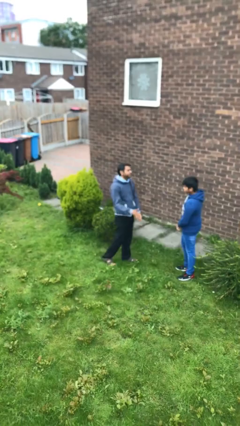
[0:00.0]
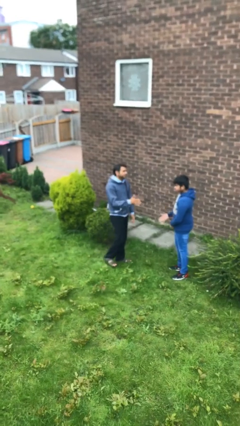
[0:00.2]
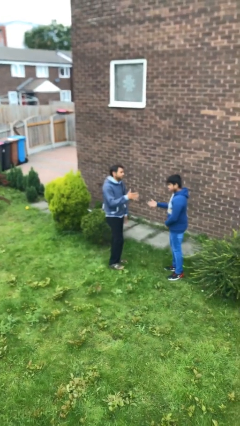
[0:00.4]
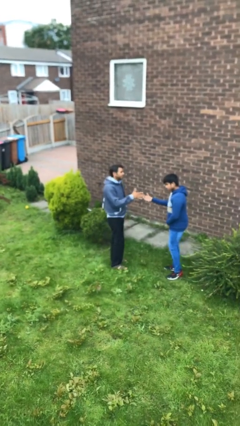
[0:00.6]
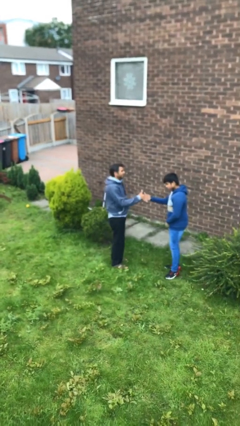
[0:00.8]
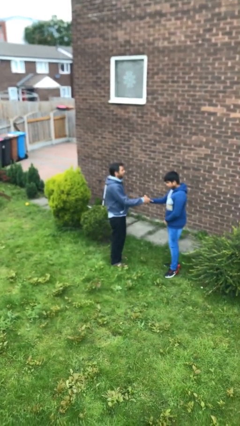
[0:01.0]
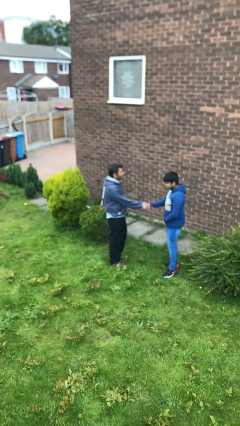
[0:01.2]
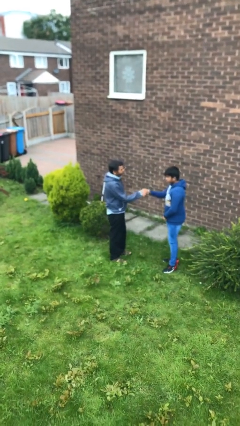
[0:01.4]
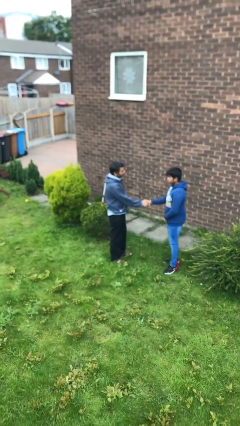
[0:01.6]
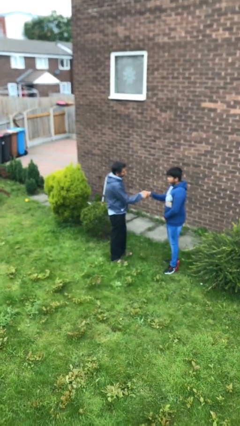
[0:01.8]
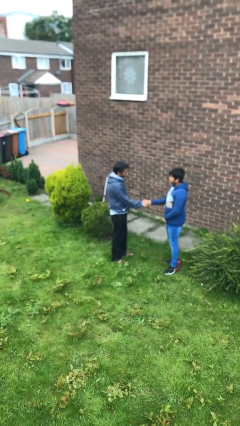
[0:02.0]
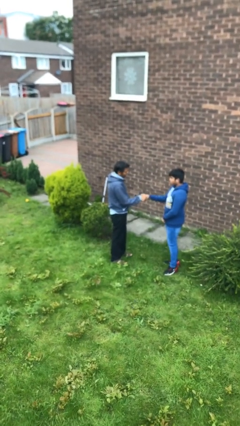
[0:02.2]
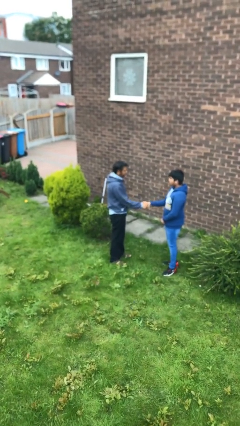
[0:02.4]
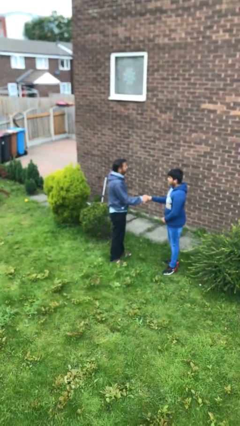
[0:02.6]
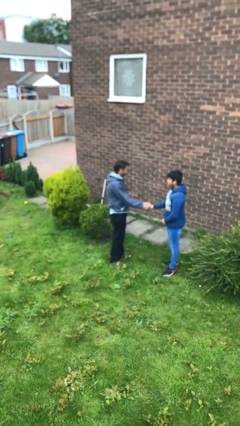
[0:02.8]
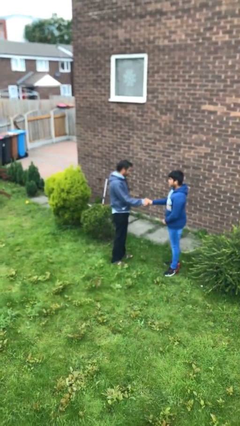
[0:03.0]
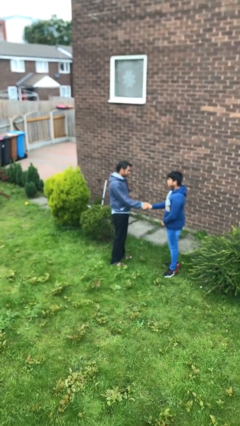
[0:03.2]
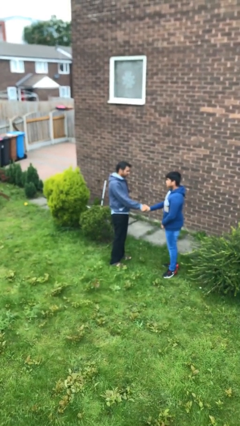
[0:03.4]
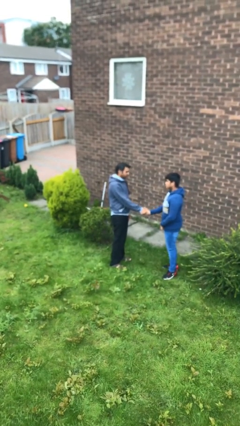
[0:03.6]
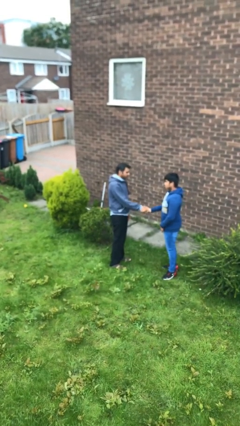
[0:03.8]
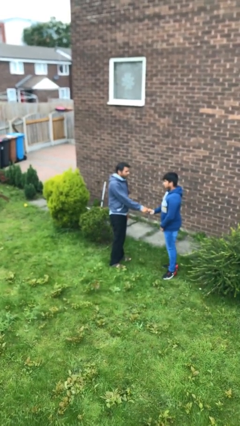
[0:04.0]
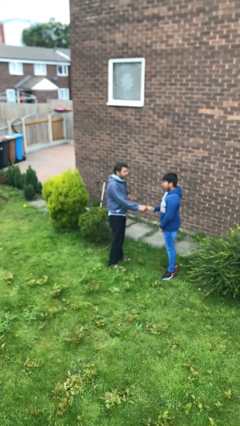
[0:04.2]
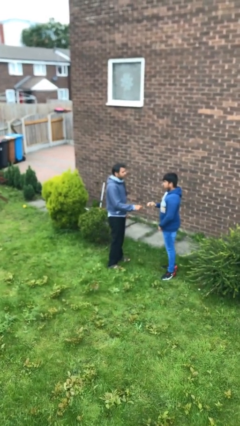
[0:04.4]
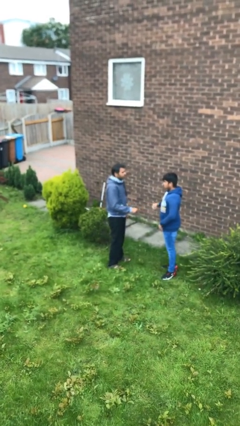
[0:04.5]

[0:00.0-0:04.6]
person shakes hand

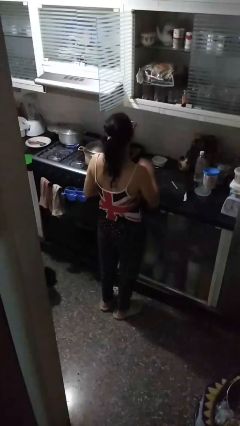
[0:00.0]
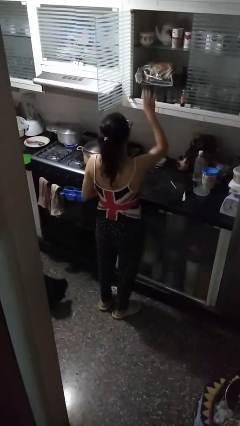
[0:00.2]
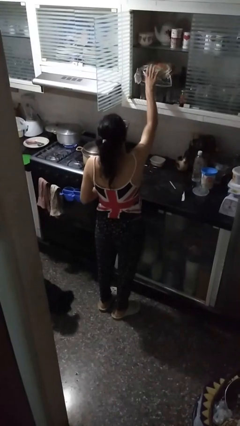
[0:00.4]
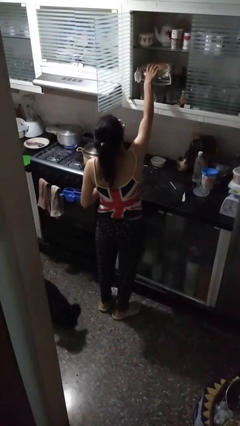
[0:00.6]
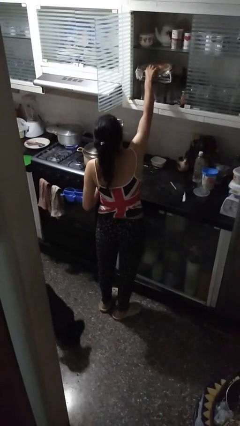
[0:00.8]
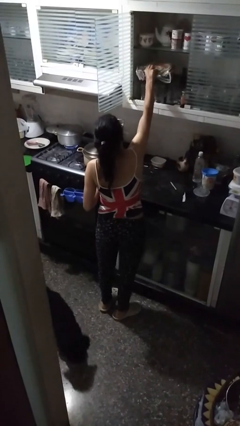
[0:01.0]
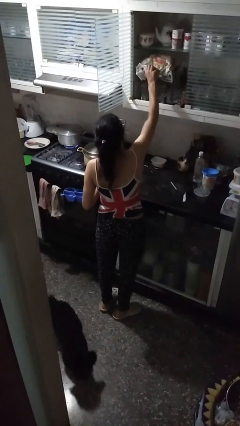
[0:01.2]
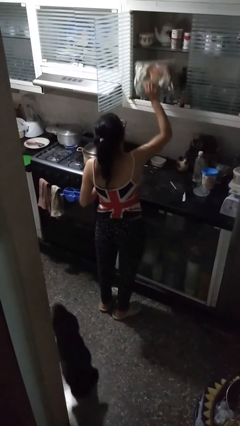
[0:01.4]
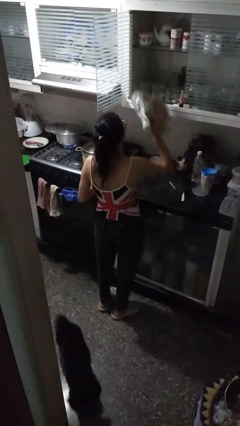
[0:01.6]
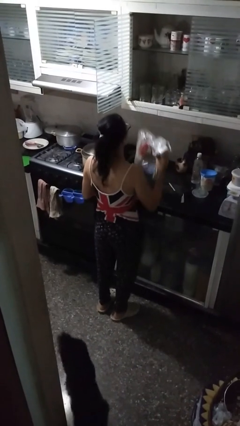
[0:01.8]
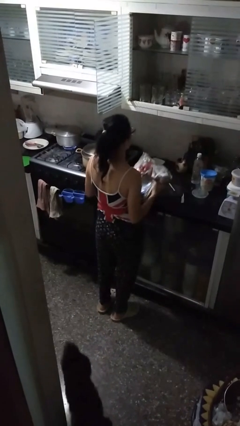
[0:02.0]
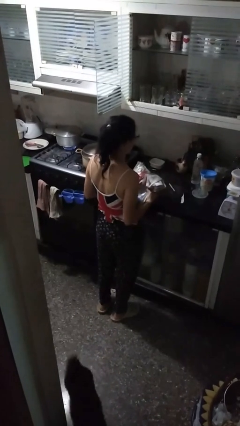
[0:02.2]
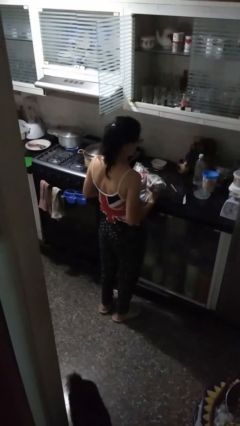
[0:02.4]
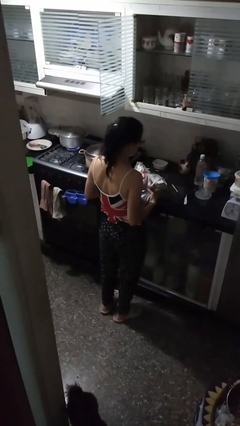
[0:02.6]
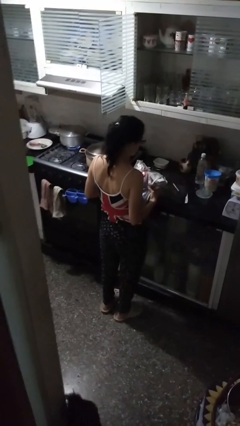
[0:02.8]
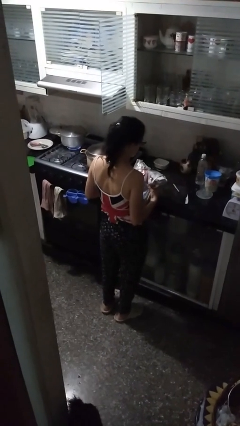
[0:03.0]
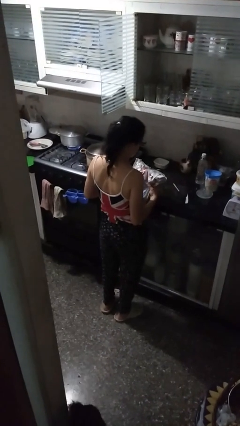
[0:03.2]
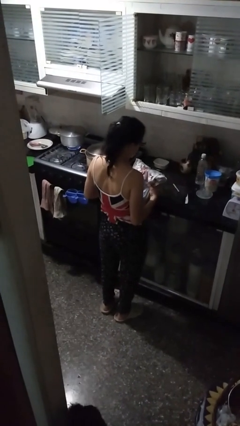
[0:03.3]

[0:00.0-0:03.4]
person picks up object from cabinet

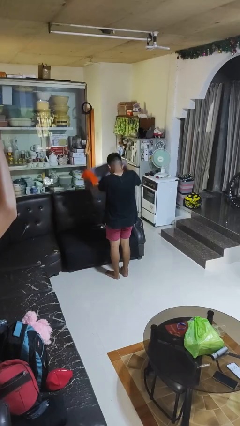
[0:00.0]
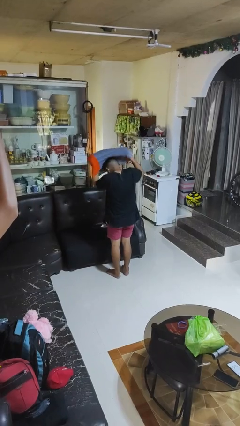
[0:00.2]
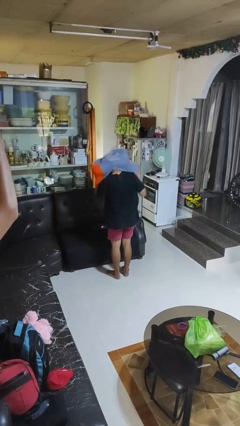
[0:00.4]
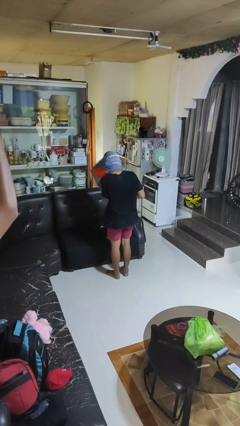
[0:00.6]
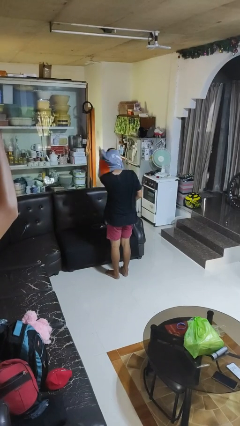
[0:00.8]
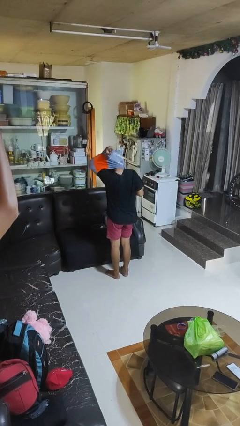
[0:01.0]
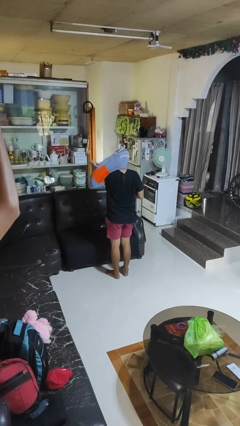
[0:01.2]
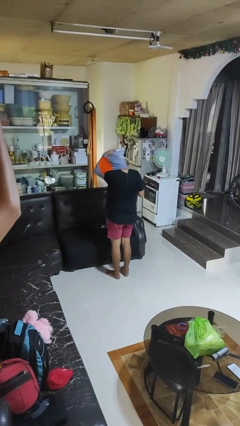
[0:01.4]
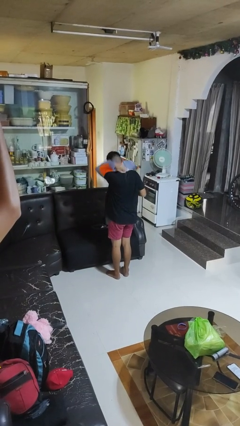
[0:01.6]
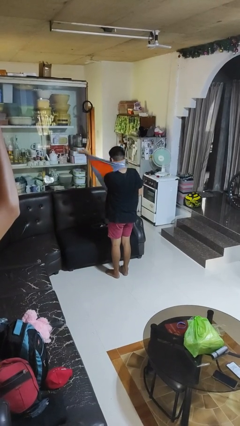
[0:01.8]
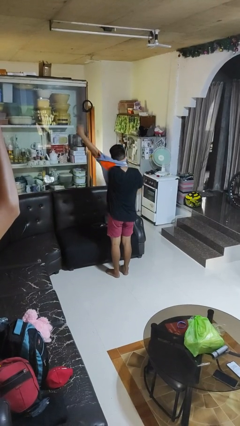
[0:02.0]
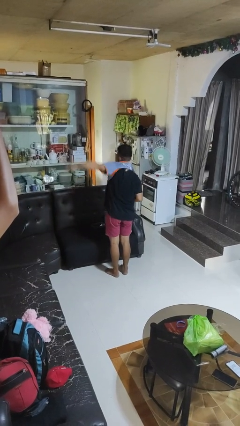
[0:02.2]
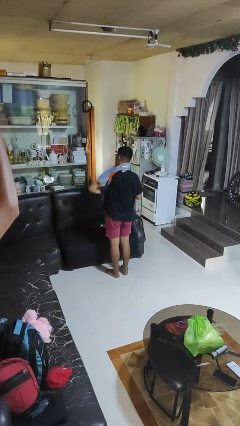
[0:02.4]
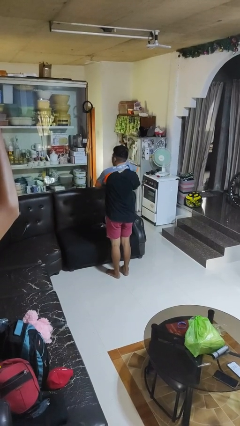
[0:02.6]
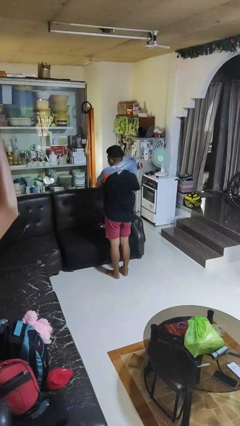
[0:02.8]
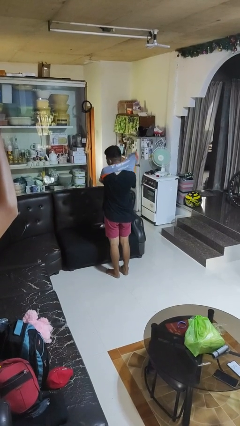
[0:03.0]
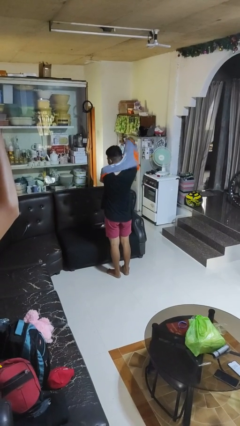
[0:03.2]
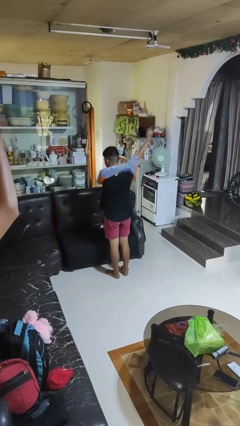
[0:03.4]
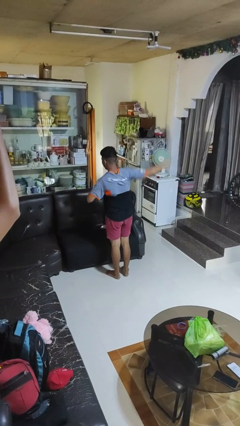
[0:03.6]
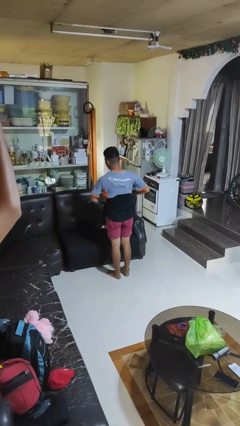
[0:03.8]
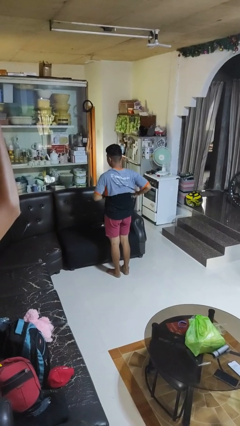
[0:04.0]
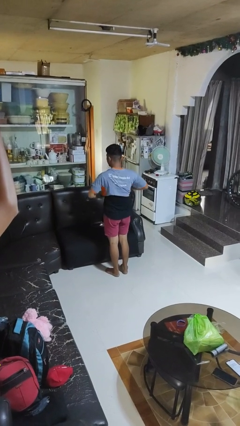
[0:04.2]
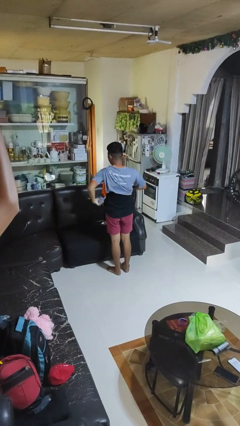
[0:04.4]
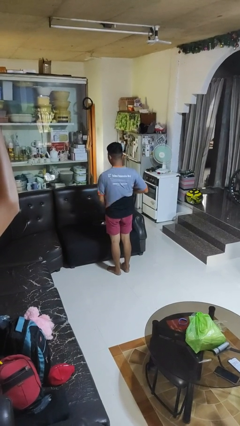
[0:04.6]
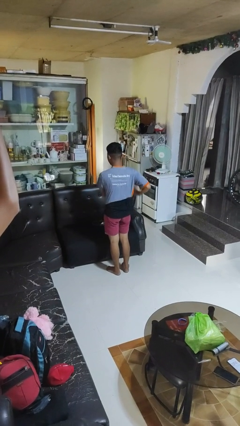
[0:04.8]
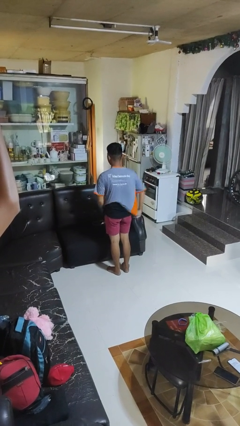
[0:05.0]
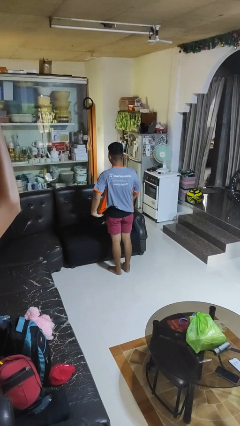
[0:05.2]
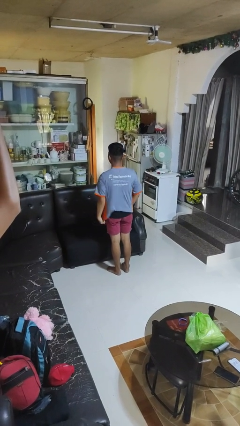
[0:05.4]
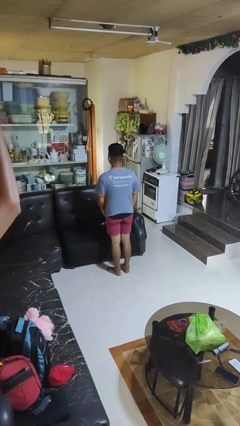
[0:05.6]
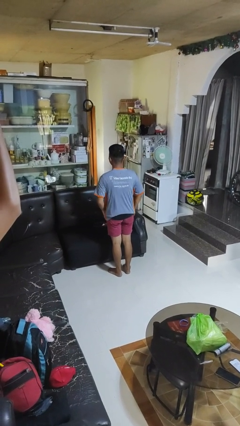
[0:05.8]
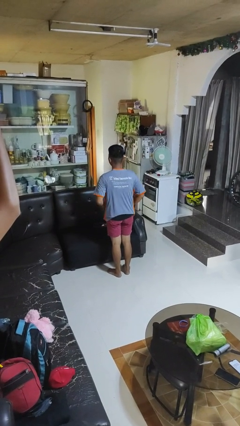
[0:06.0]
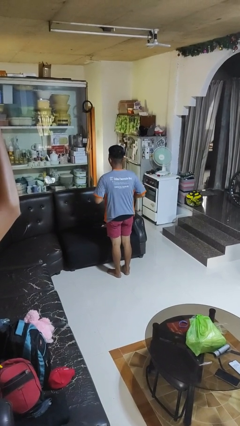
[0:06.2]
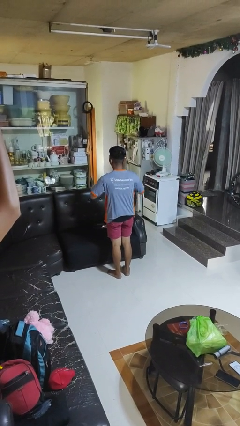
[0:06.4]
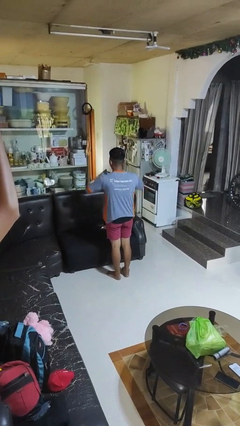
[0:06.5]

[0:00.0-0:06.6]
person puts on shirt

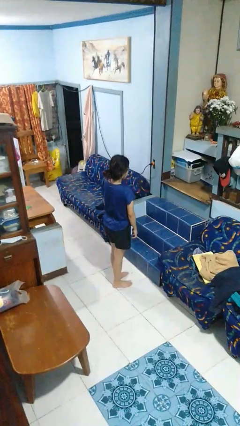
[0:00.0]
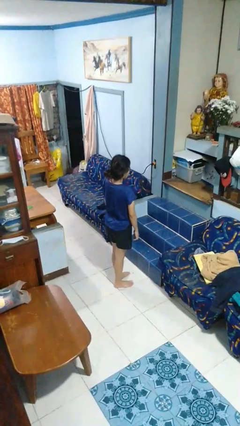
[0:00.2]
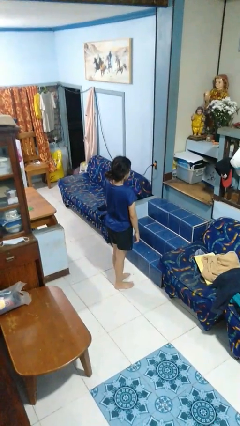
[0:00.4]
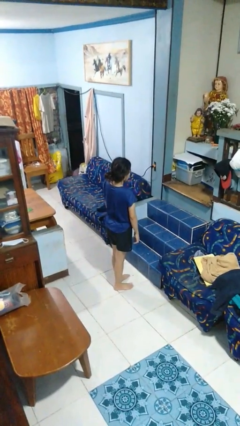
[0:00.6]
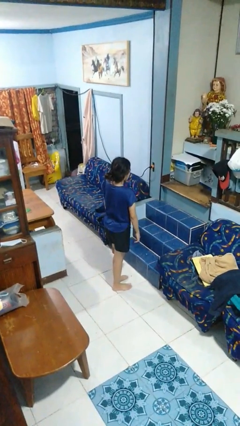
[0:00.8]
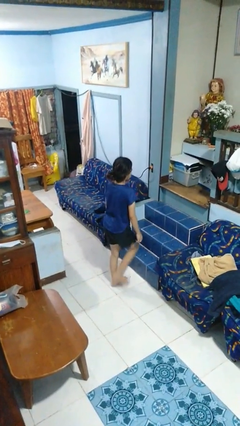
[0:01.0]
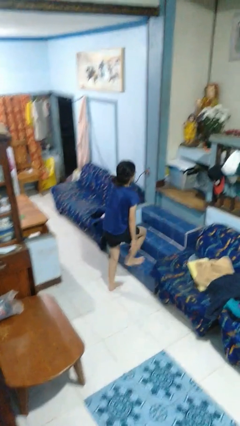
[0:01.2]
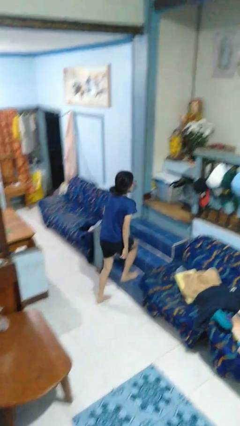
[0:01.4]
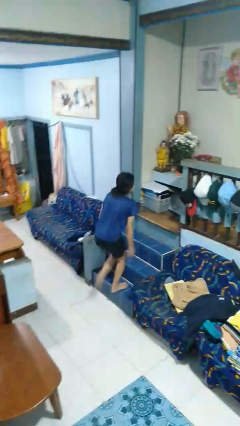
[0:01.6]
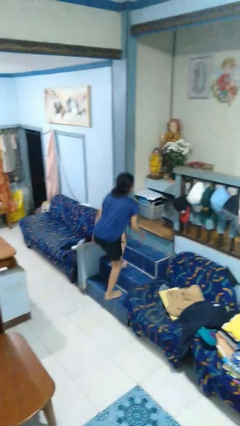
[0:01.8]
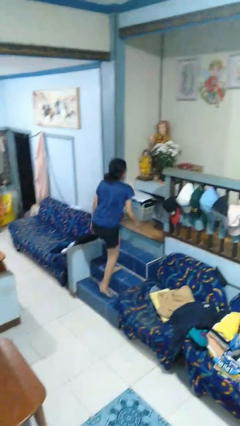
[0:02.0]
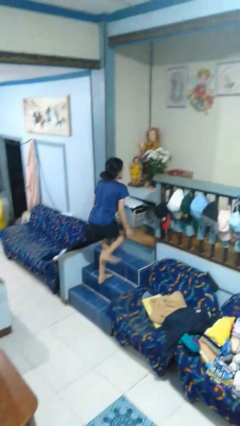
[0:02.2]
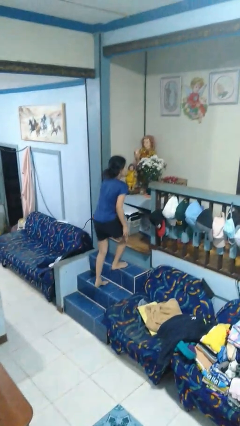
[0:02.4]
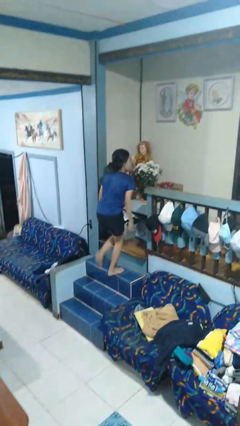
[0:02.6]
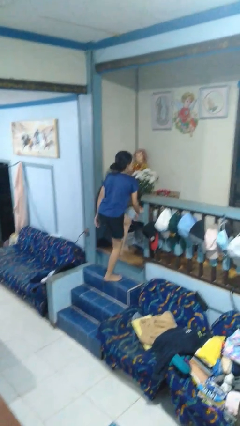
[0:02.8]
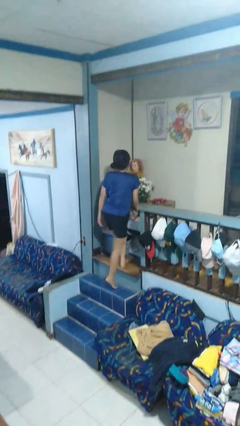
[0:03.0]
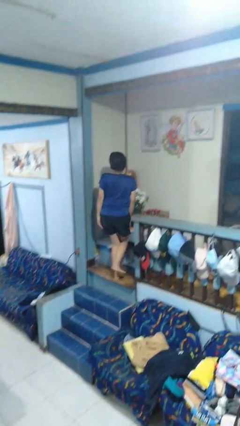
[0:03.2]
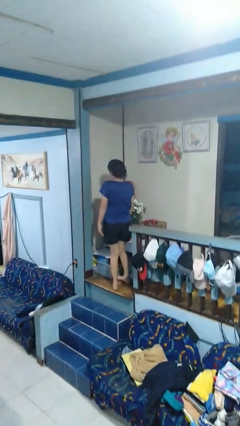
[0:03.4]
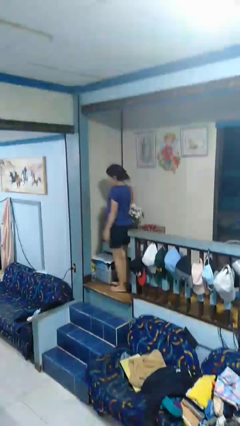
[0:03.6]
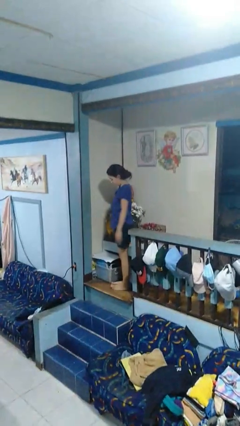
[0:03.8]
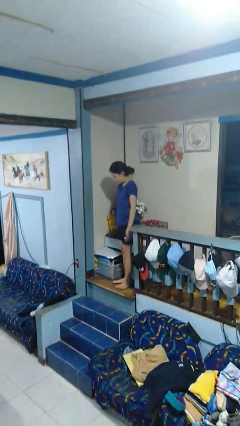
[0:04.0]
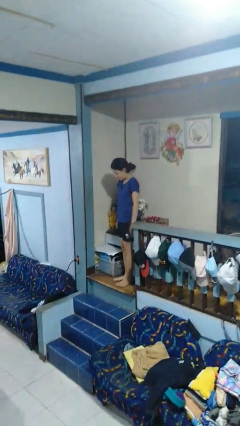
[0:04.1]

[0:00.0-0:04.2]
person climbs up stairs
